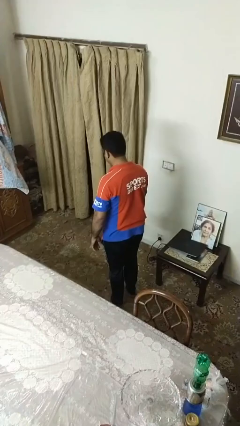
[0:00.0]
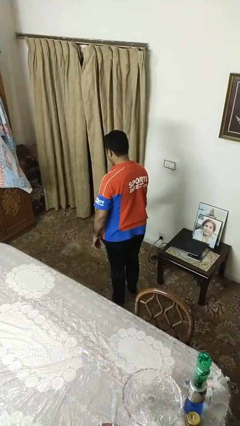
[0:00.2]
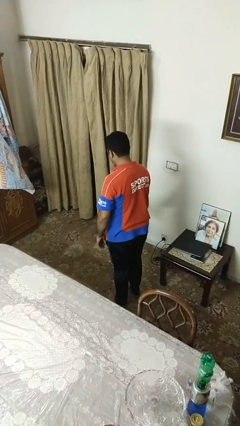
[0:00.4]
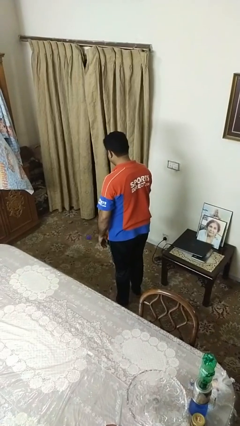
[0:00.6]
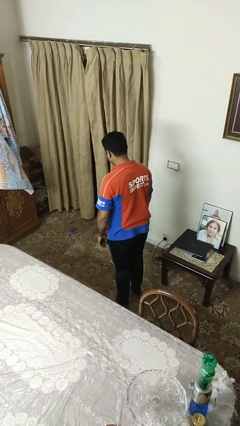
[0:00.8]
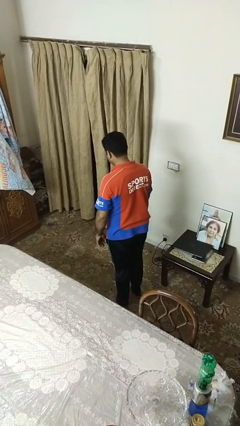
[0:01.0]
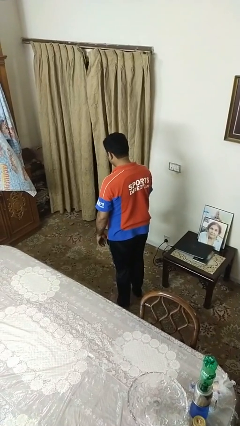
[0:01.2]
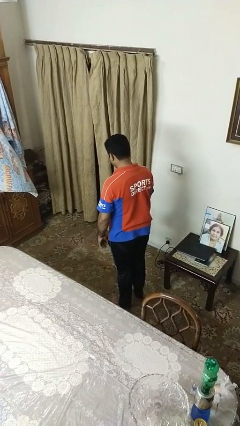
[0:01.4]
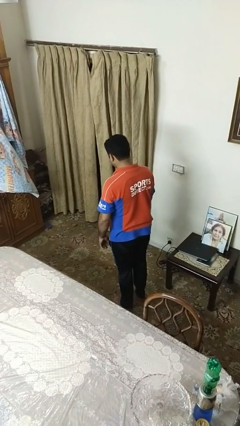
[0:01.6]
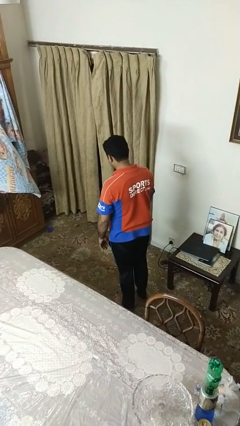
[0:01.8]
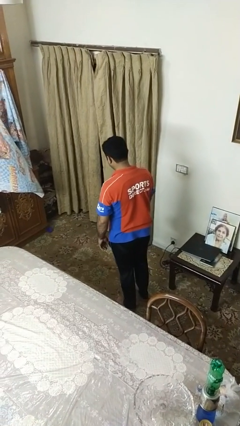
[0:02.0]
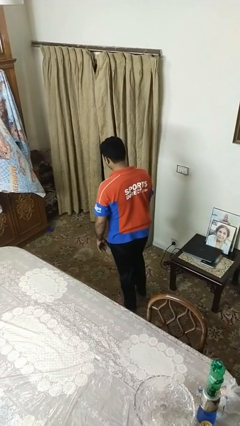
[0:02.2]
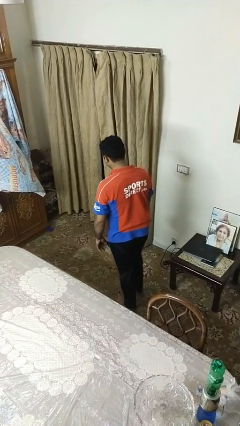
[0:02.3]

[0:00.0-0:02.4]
person throws object to ground

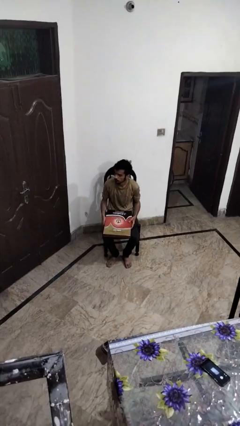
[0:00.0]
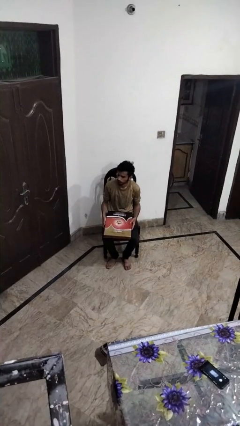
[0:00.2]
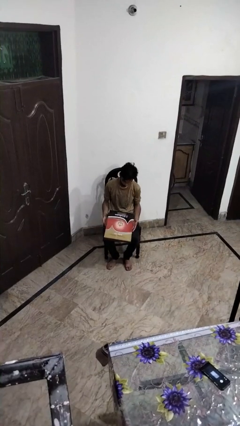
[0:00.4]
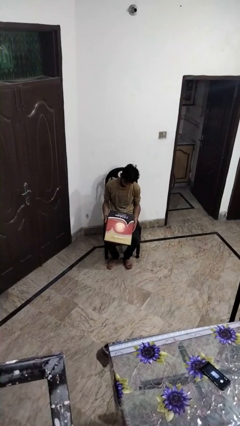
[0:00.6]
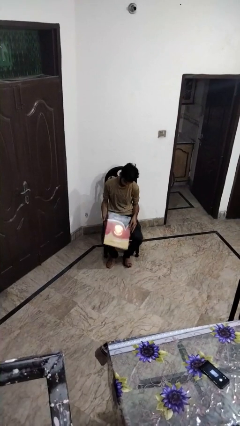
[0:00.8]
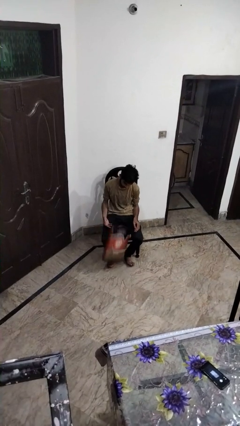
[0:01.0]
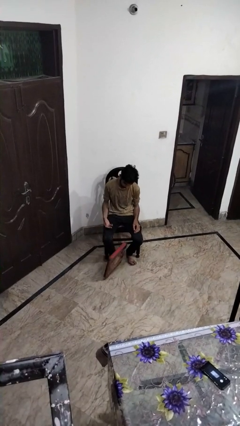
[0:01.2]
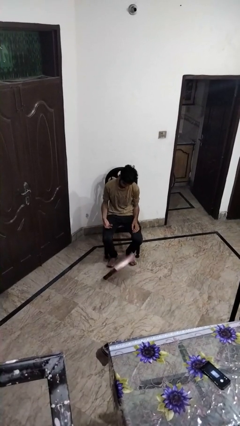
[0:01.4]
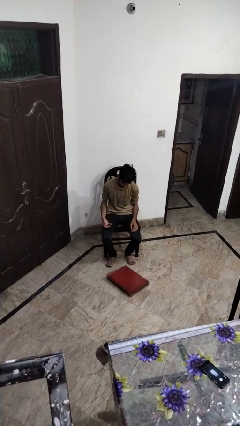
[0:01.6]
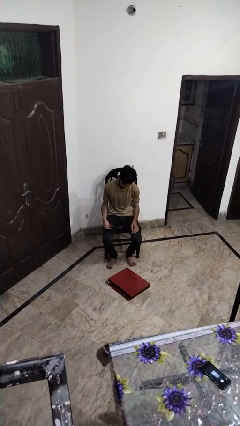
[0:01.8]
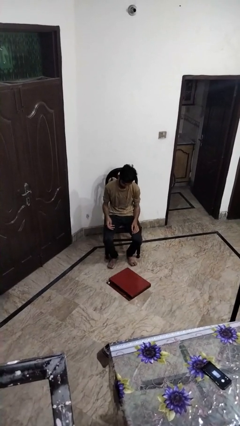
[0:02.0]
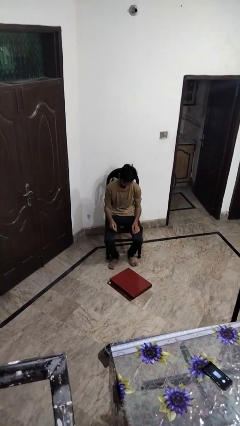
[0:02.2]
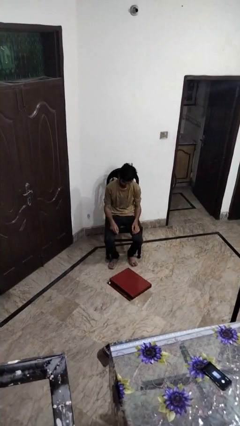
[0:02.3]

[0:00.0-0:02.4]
person drops object

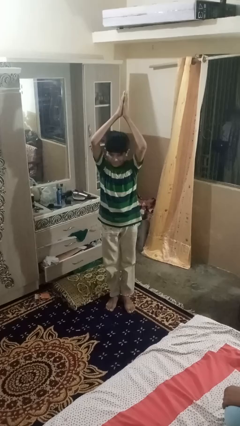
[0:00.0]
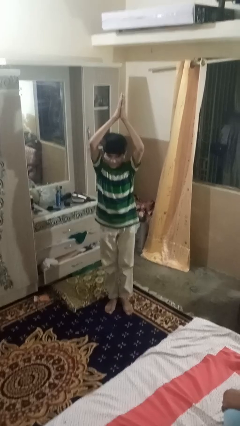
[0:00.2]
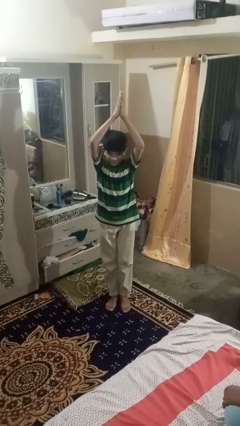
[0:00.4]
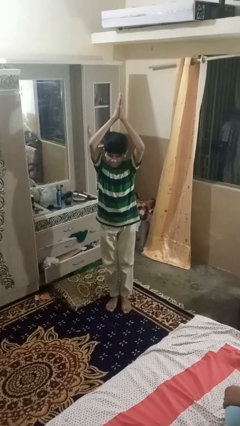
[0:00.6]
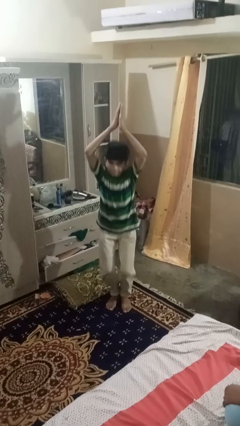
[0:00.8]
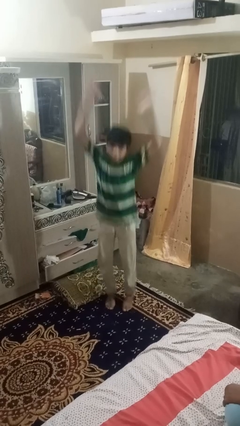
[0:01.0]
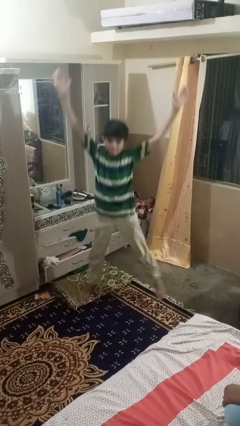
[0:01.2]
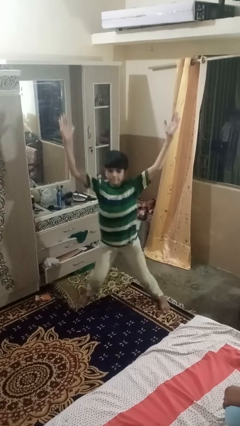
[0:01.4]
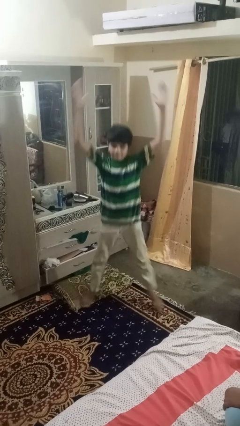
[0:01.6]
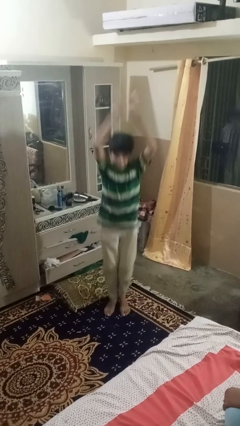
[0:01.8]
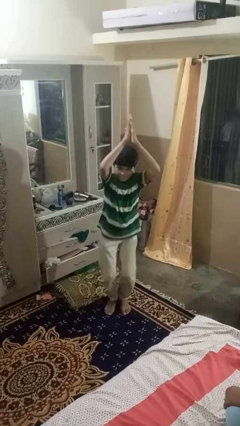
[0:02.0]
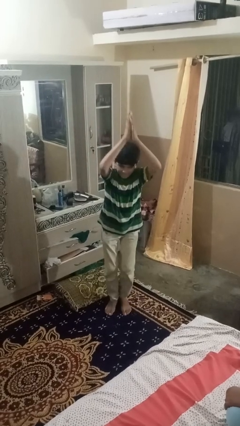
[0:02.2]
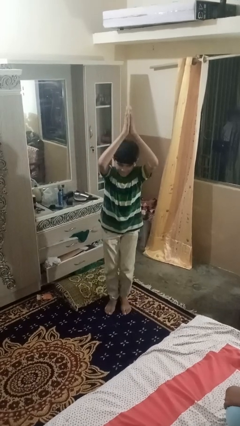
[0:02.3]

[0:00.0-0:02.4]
person exercises with jumping jacks

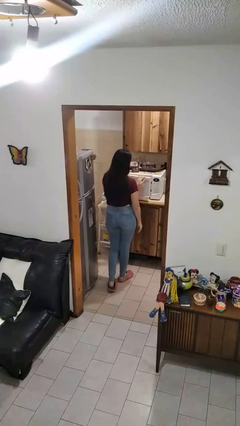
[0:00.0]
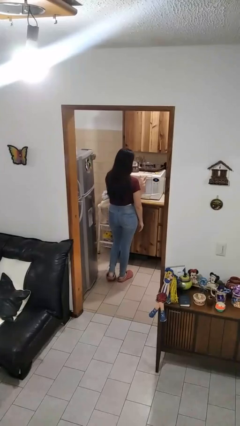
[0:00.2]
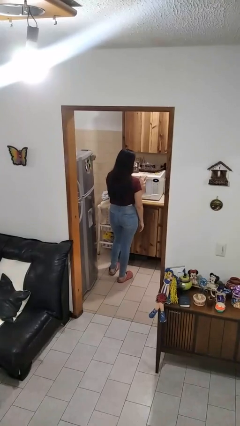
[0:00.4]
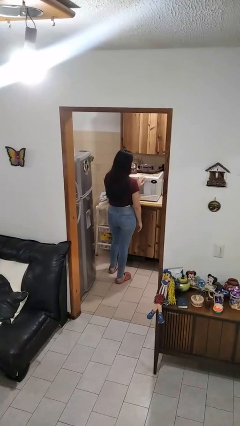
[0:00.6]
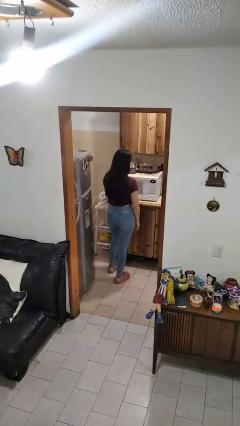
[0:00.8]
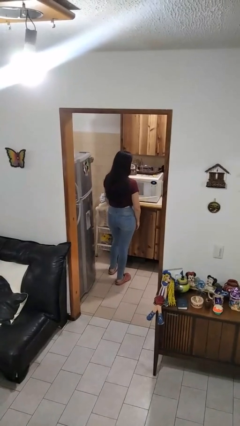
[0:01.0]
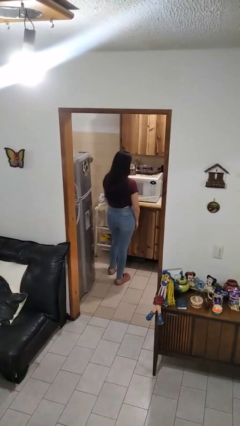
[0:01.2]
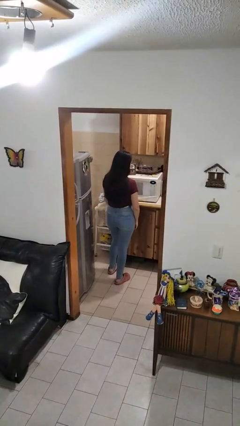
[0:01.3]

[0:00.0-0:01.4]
person closes microwave

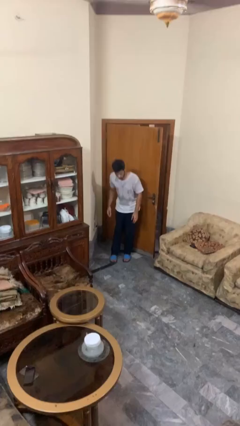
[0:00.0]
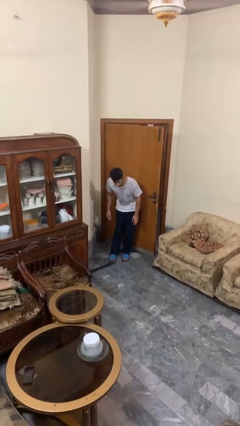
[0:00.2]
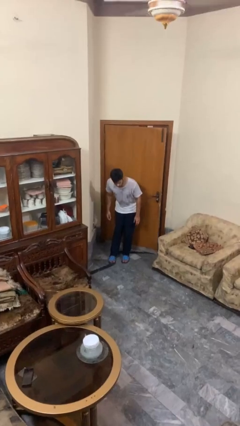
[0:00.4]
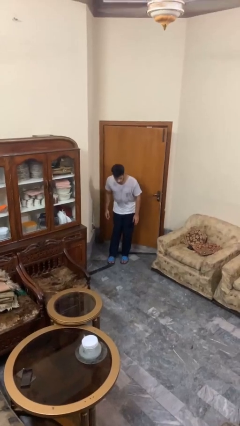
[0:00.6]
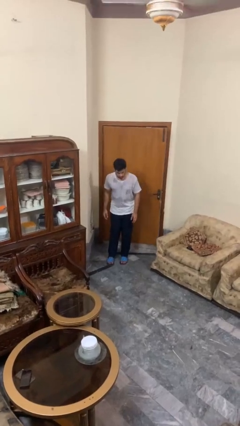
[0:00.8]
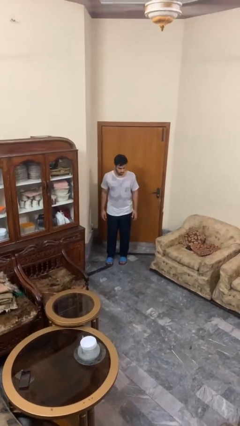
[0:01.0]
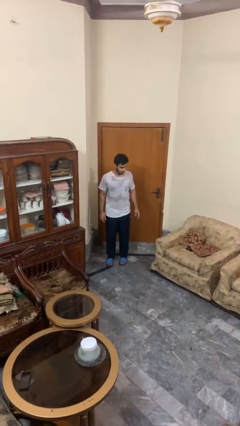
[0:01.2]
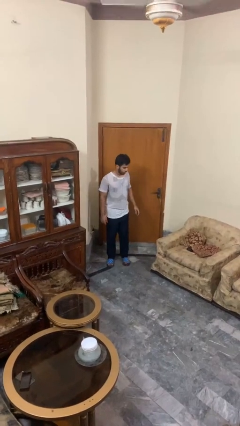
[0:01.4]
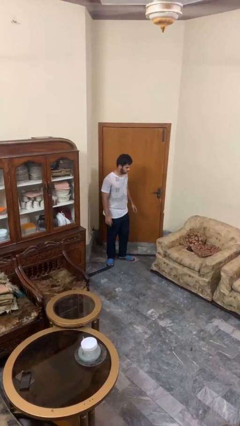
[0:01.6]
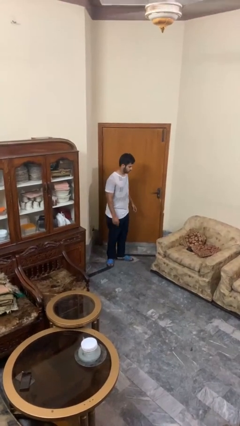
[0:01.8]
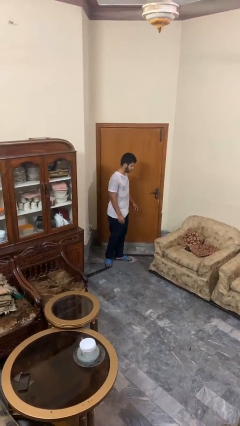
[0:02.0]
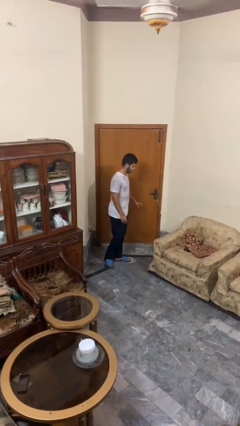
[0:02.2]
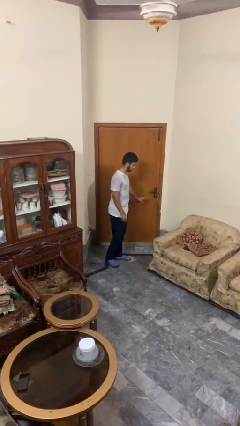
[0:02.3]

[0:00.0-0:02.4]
person closes door with hip

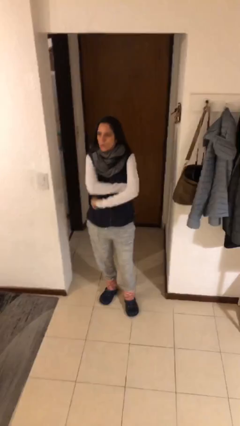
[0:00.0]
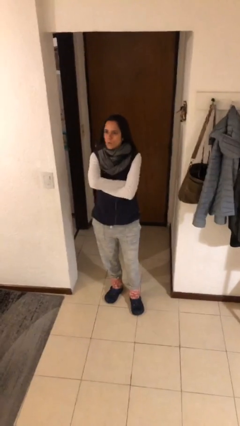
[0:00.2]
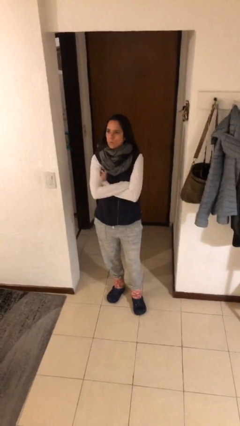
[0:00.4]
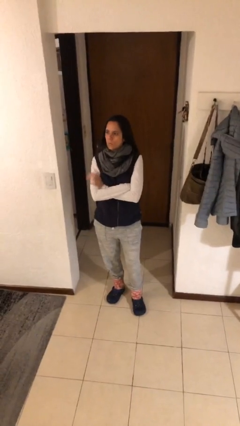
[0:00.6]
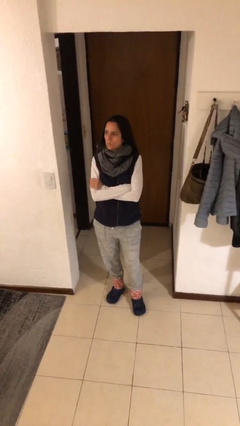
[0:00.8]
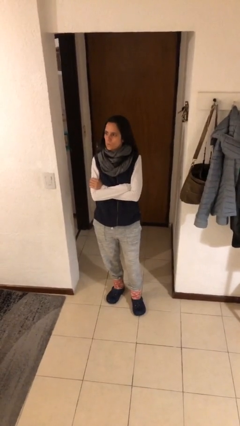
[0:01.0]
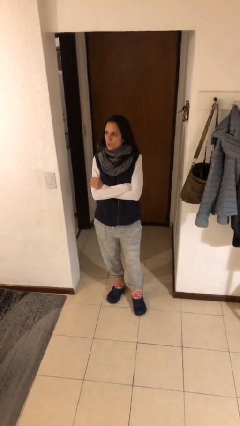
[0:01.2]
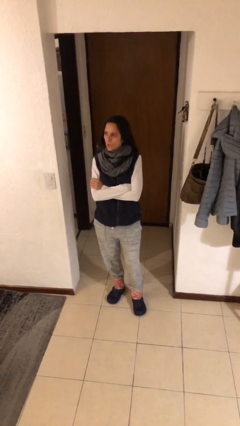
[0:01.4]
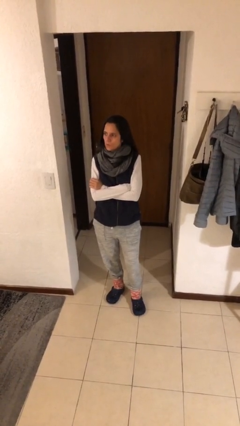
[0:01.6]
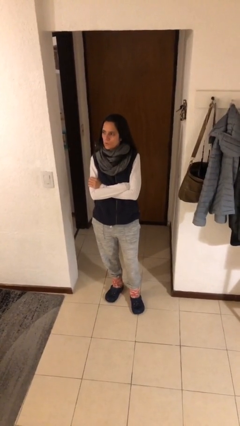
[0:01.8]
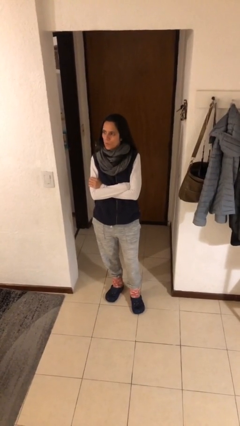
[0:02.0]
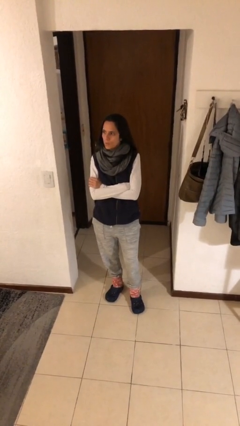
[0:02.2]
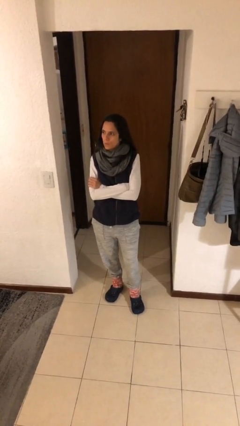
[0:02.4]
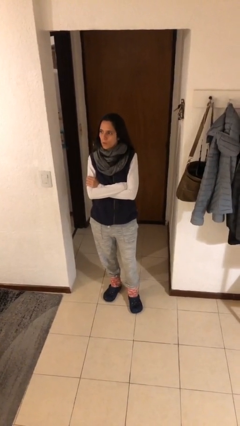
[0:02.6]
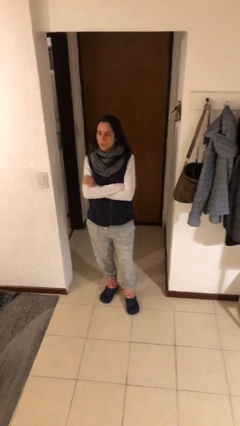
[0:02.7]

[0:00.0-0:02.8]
person crosses arms

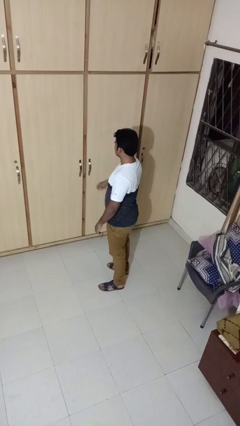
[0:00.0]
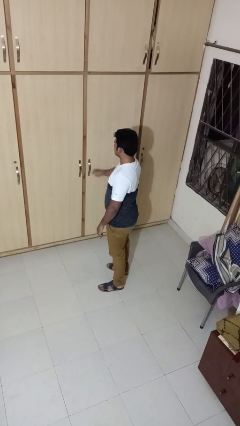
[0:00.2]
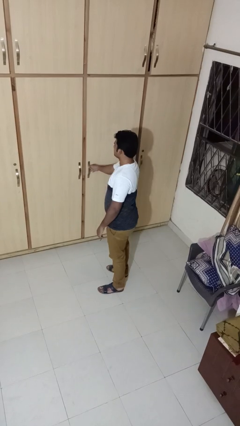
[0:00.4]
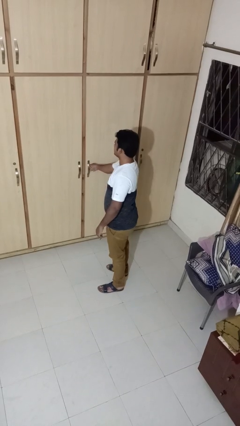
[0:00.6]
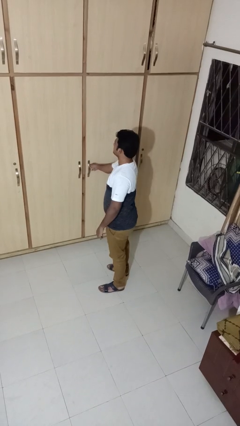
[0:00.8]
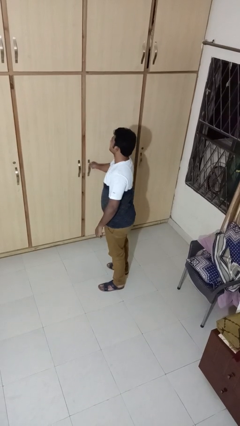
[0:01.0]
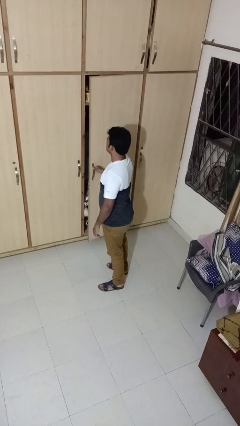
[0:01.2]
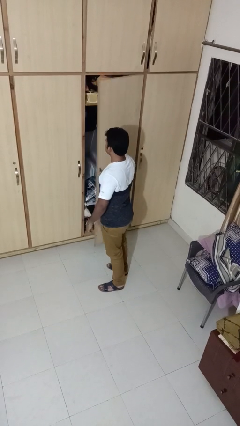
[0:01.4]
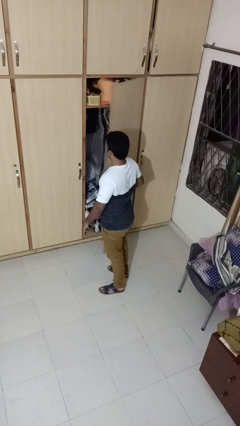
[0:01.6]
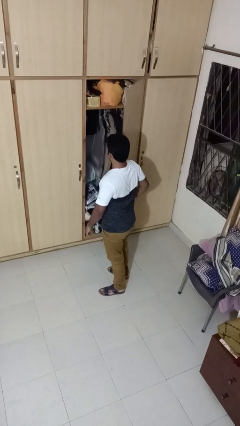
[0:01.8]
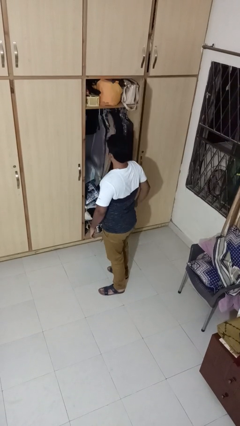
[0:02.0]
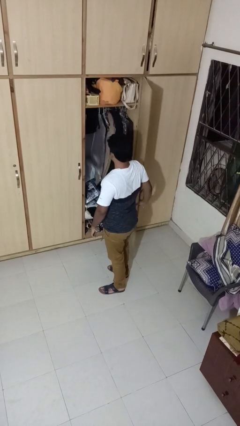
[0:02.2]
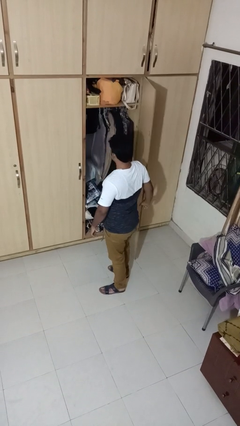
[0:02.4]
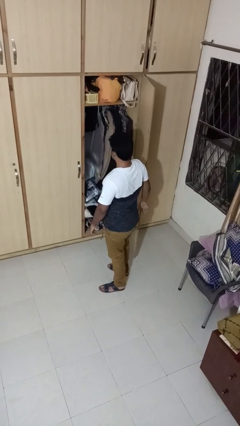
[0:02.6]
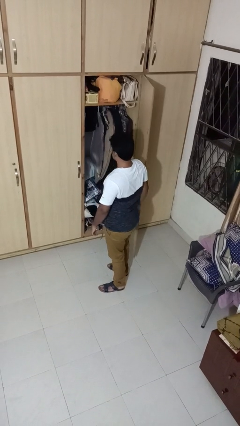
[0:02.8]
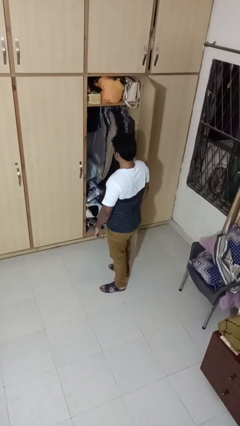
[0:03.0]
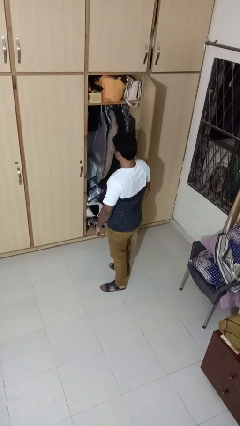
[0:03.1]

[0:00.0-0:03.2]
person opens closet door
